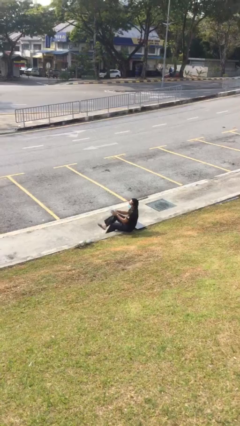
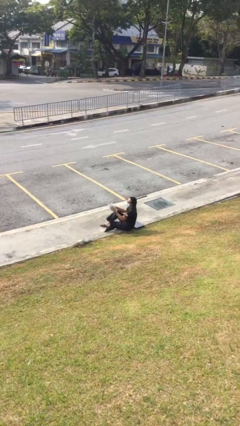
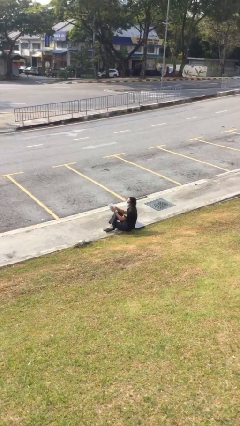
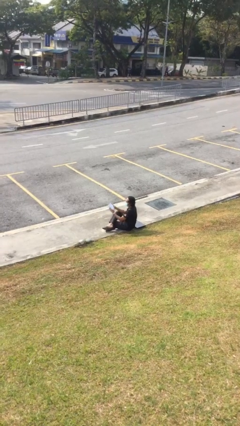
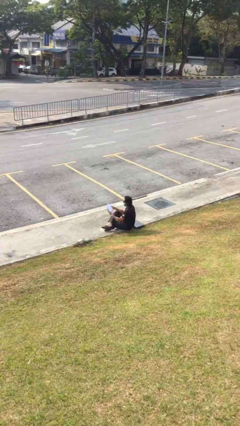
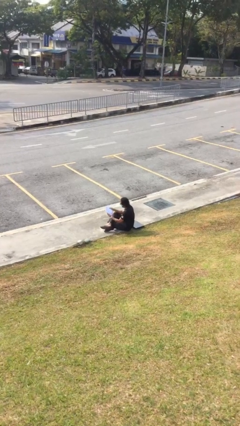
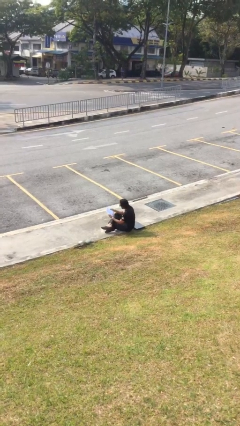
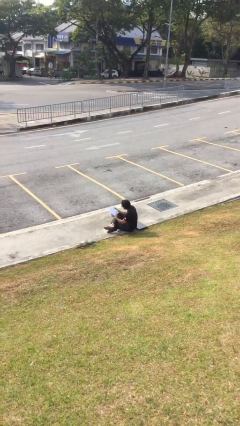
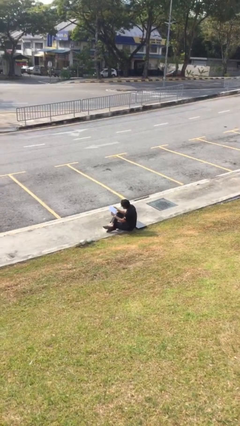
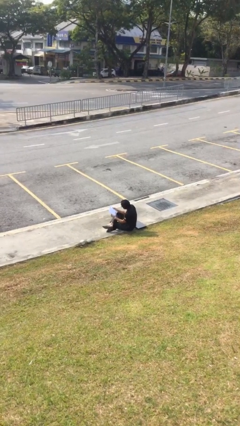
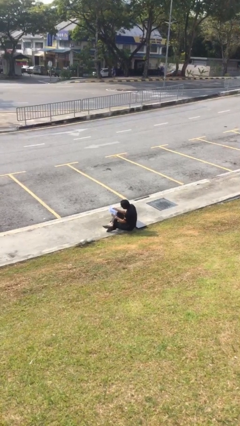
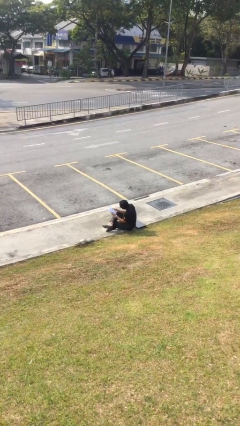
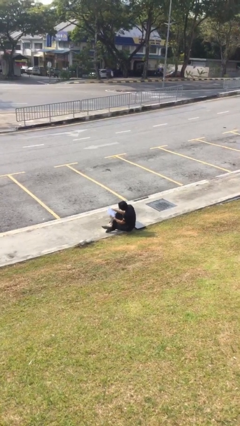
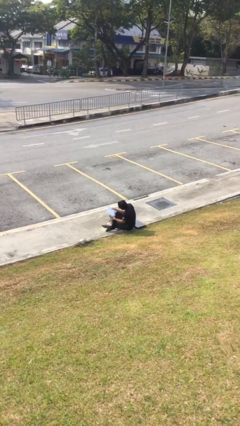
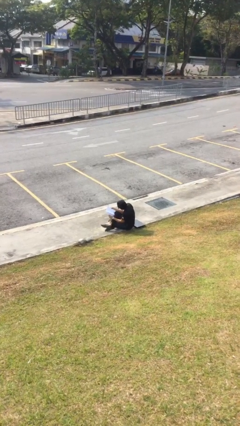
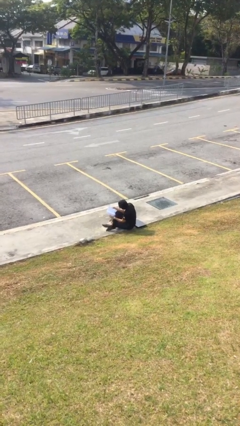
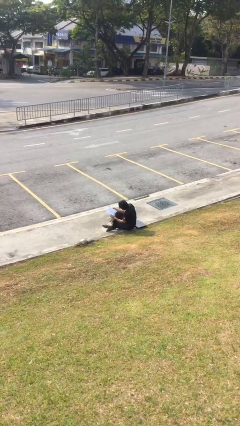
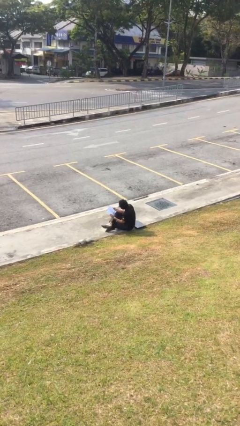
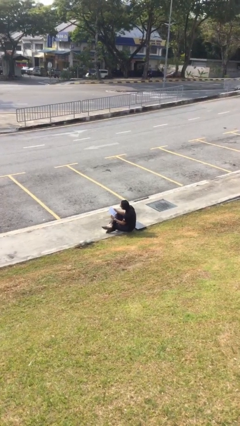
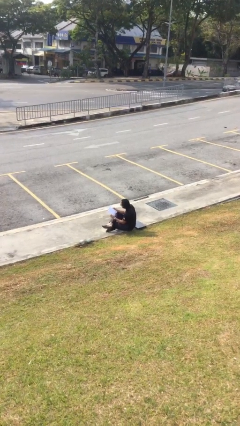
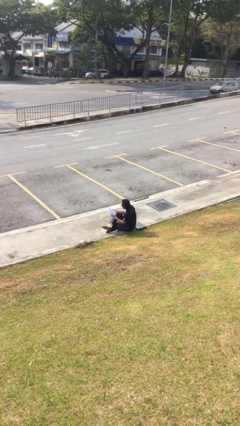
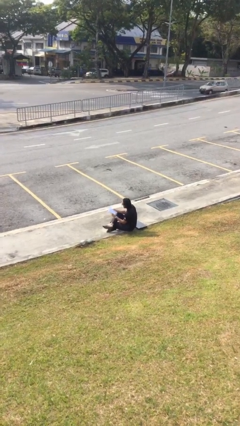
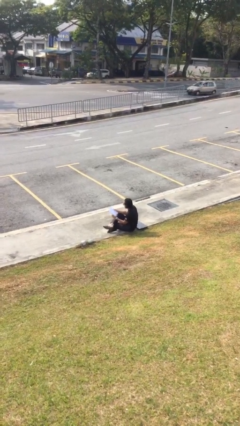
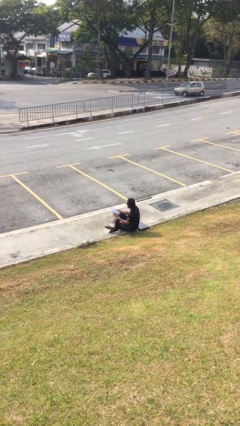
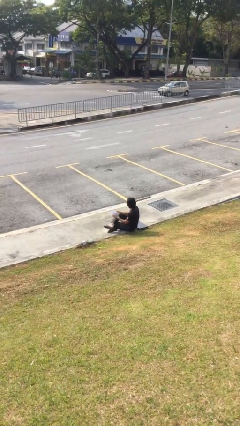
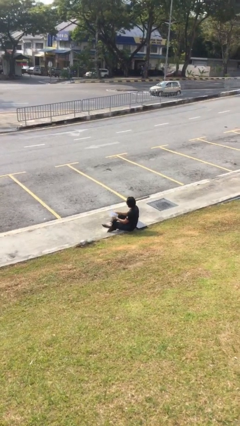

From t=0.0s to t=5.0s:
person reads document

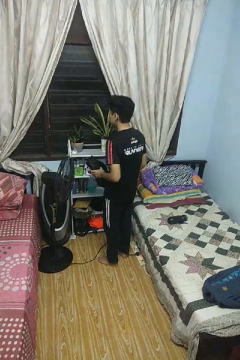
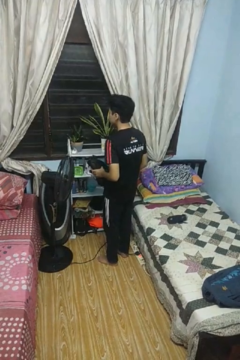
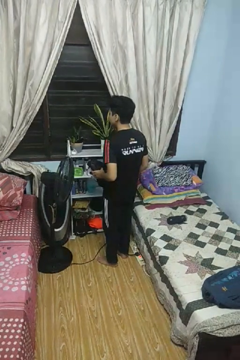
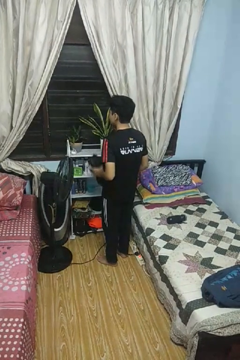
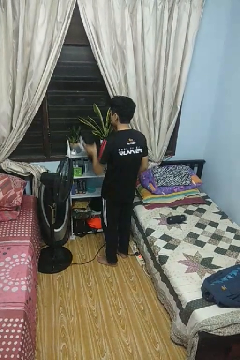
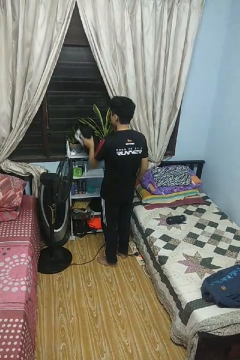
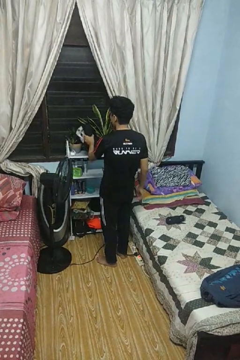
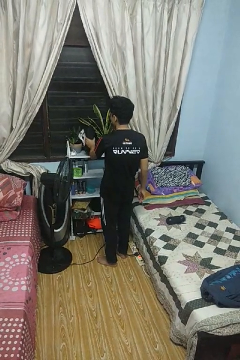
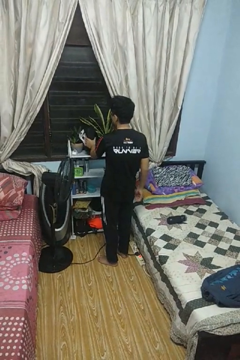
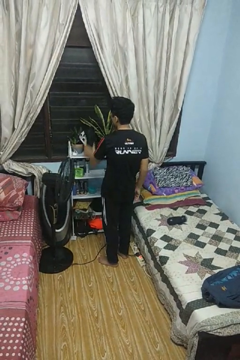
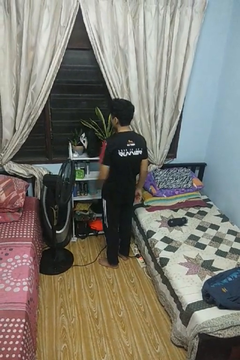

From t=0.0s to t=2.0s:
person puts down object on countertop

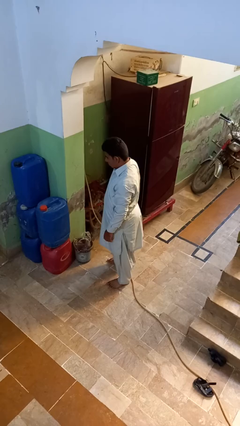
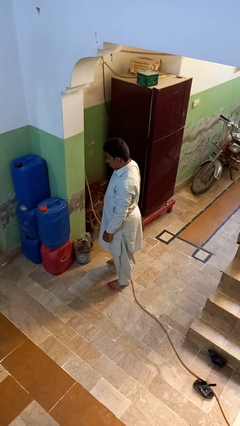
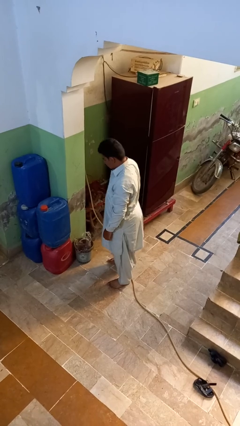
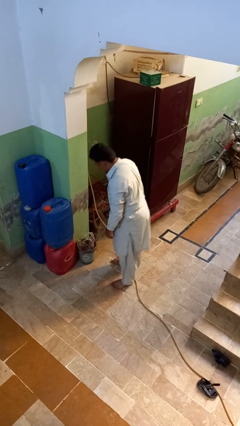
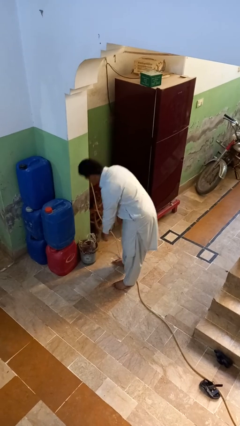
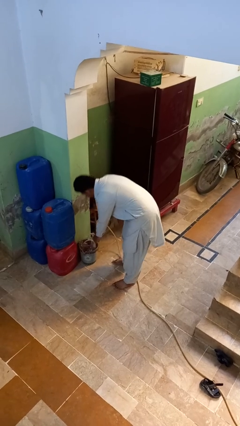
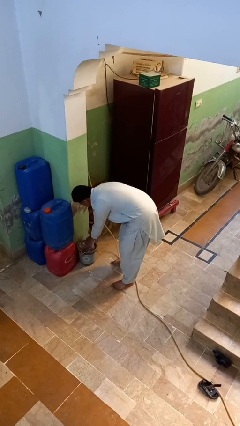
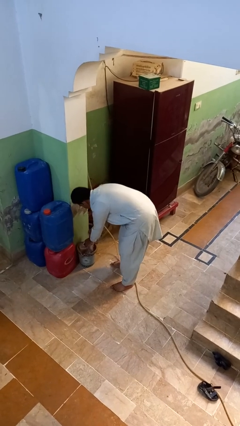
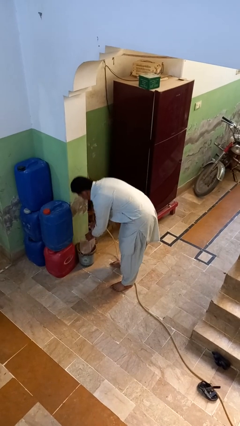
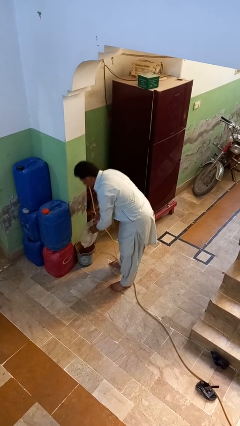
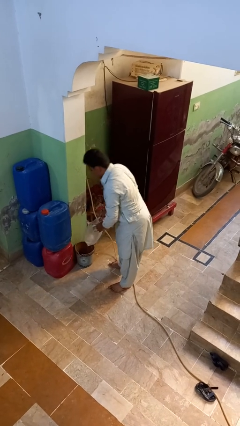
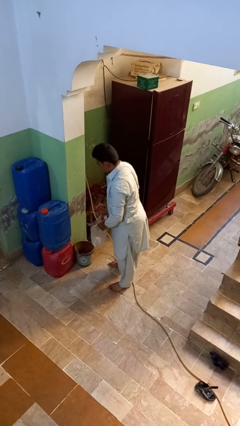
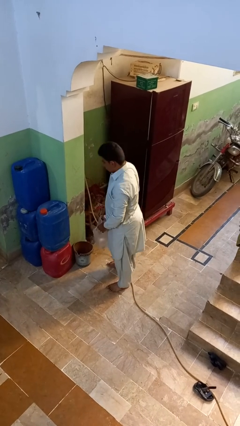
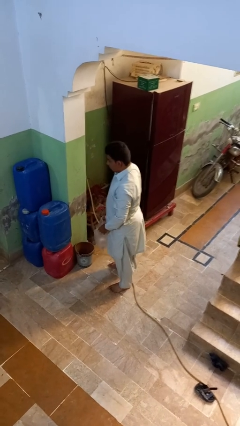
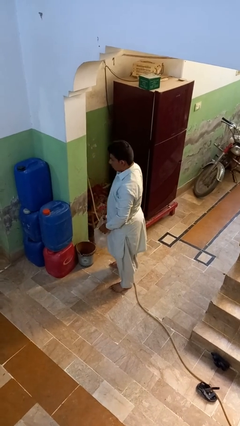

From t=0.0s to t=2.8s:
person removes trashbag from trashcan

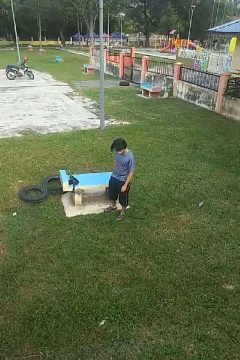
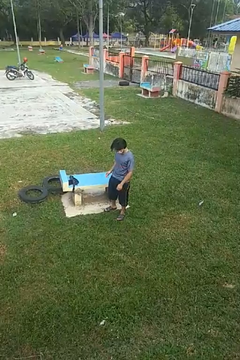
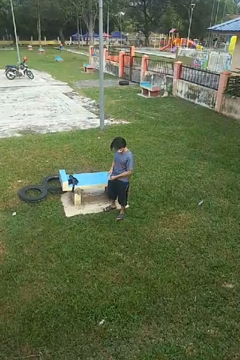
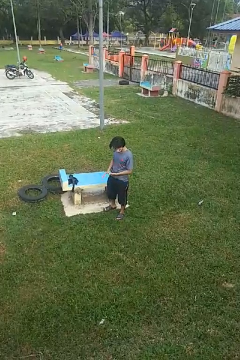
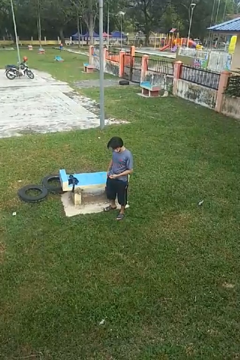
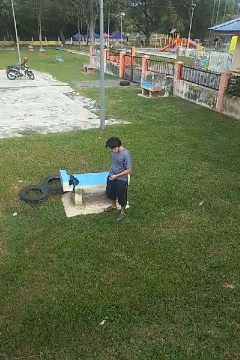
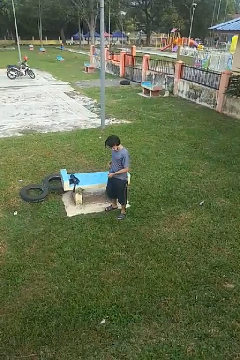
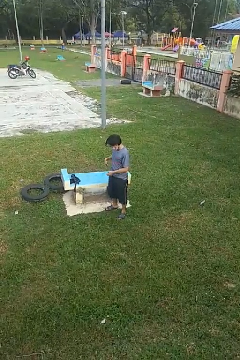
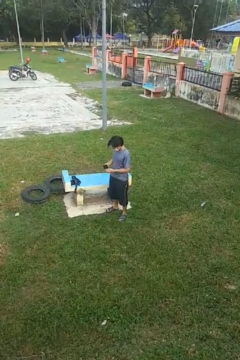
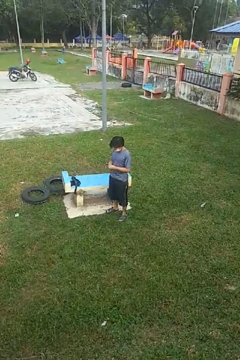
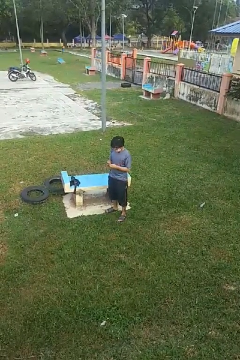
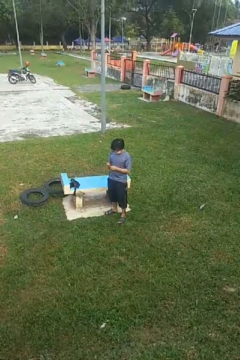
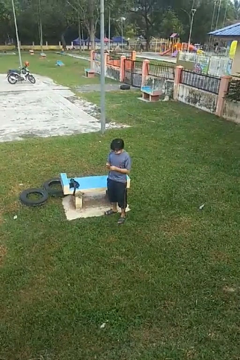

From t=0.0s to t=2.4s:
person takes phone from pocket

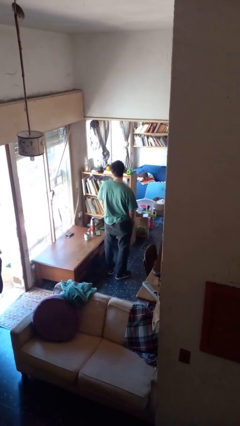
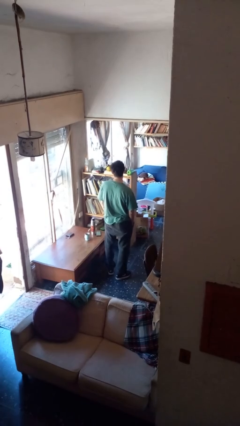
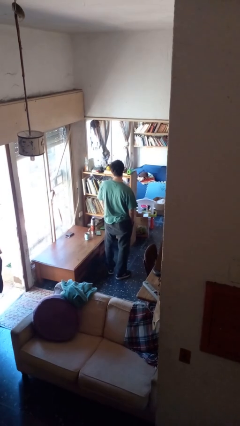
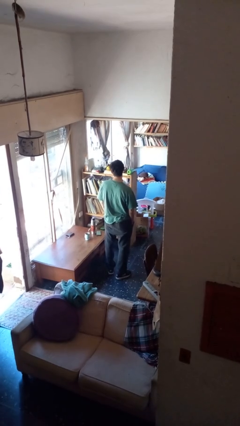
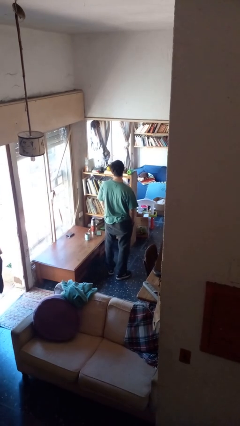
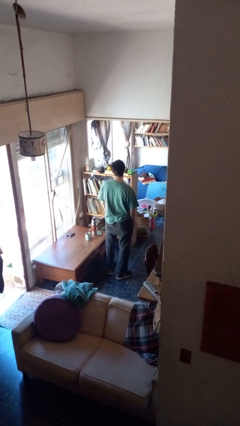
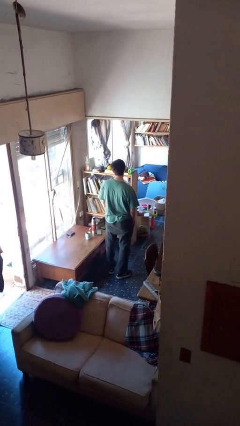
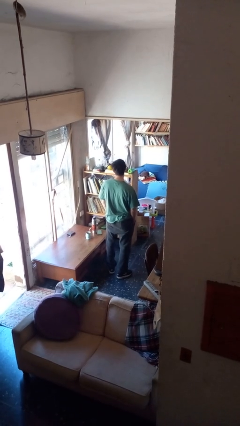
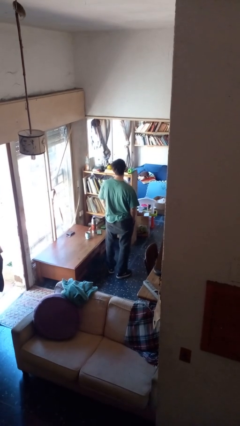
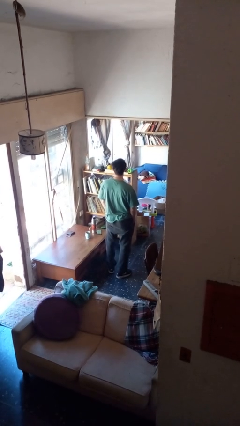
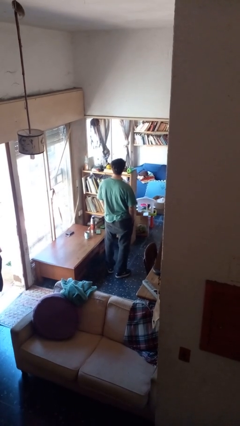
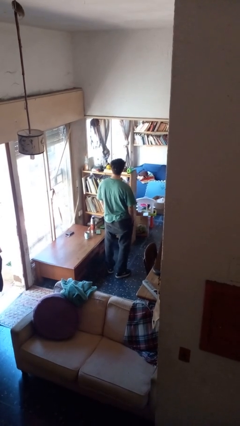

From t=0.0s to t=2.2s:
person sticks out tongue

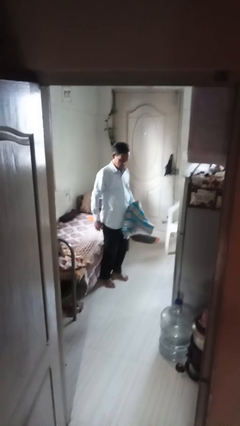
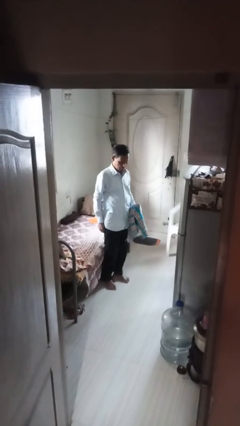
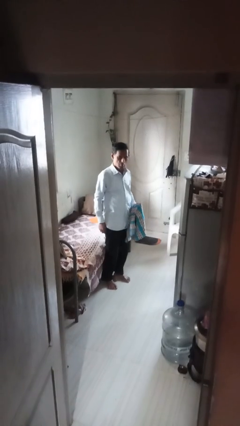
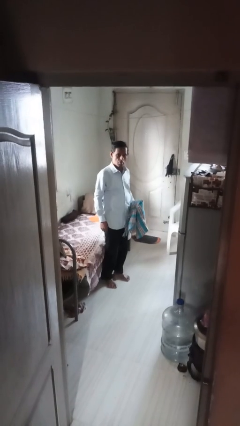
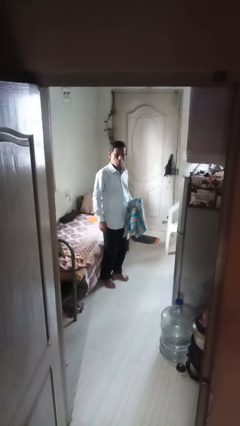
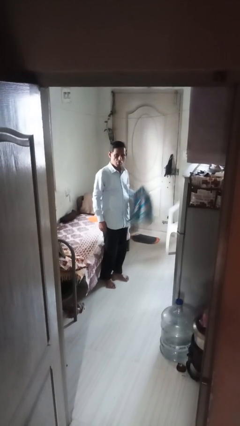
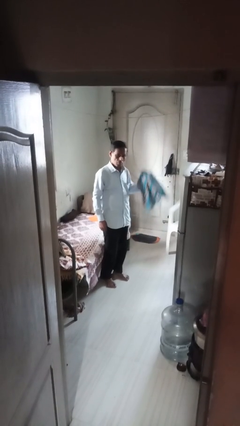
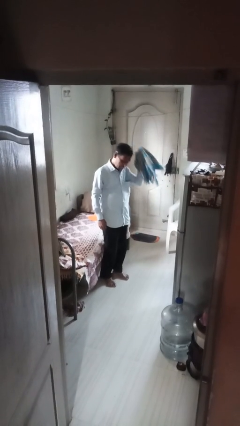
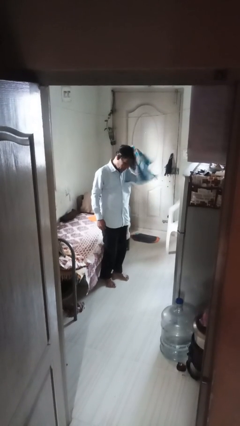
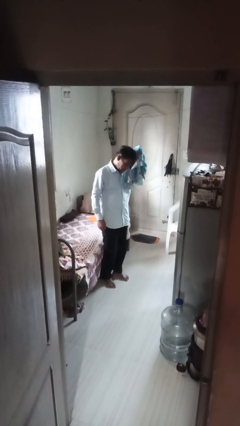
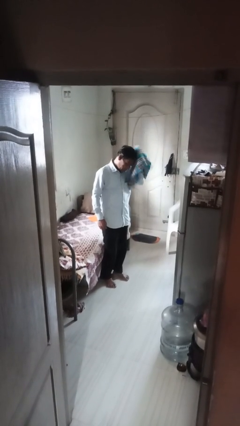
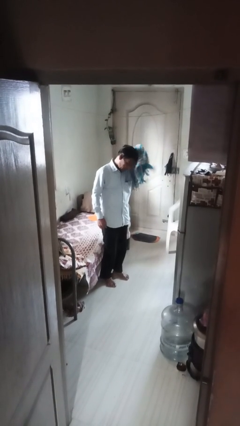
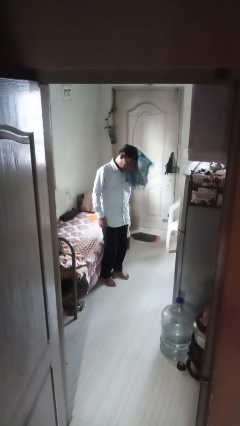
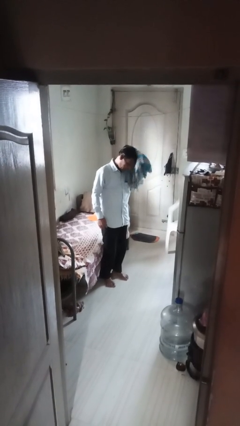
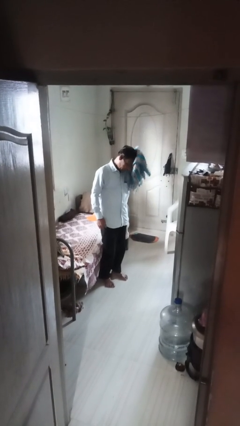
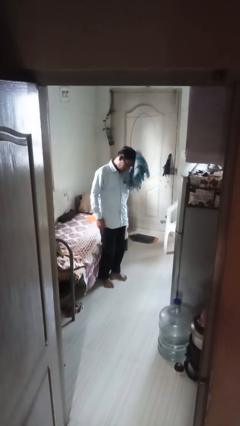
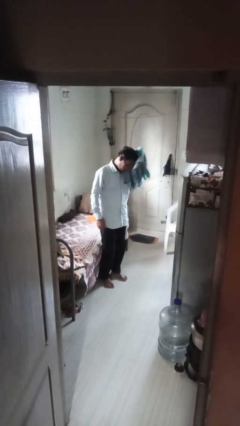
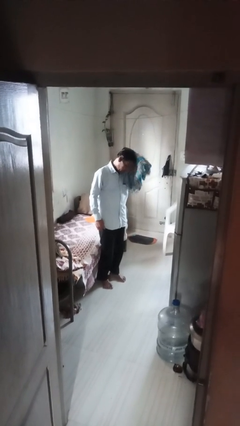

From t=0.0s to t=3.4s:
person dries hair with towel

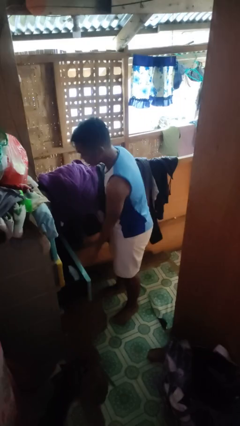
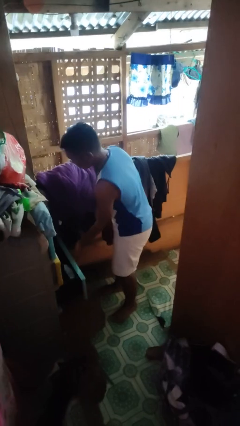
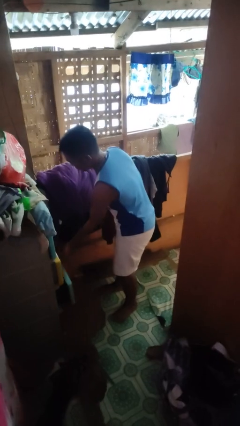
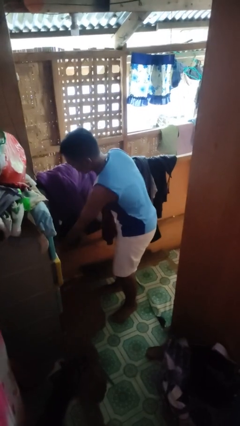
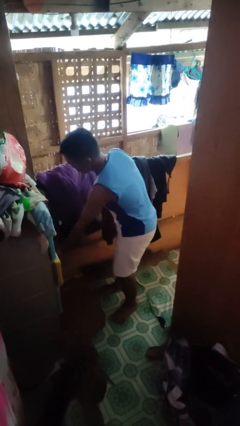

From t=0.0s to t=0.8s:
person closes dresser drawer
